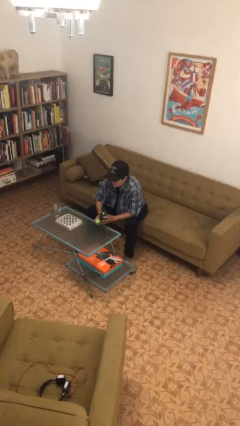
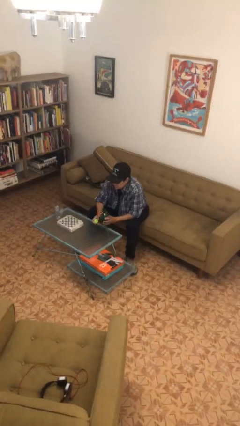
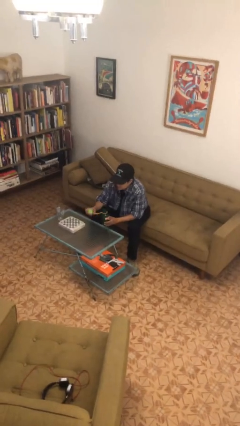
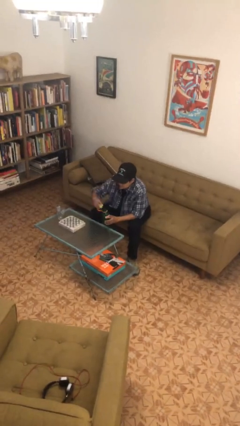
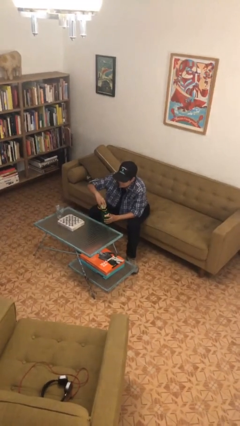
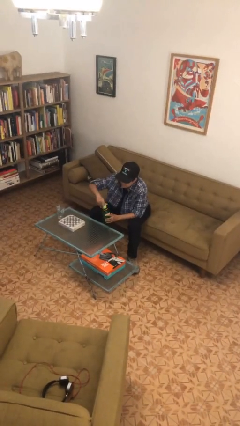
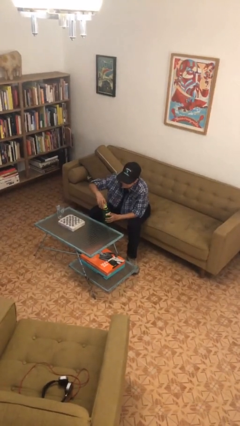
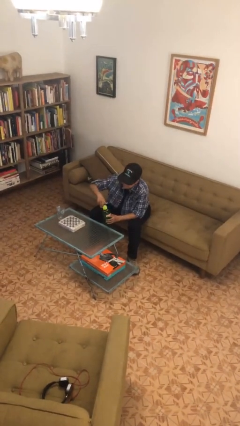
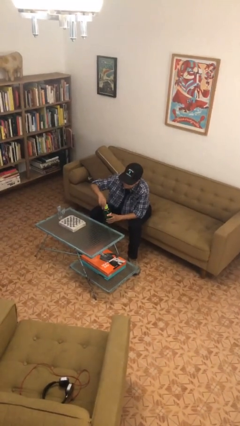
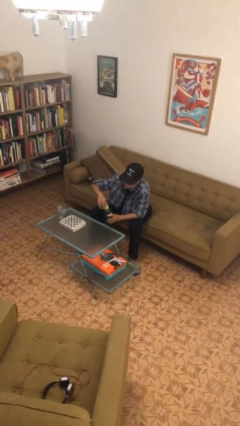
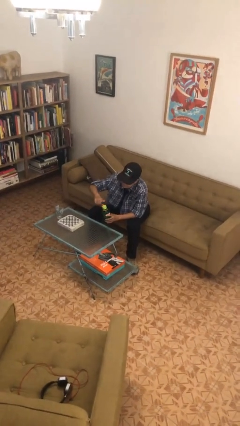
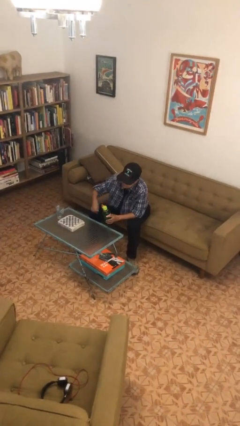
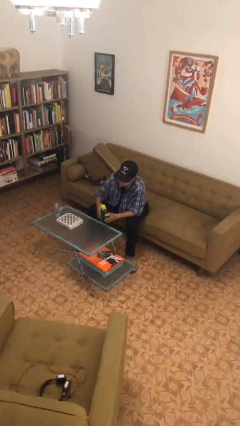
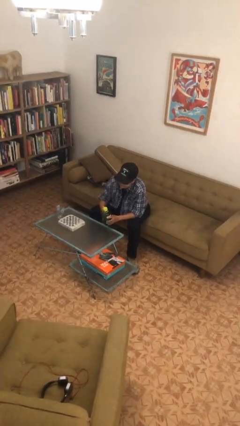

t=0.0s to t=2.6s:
person screws lid to bottle

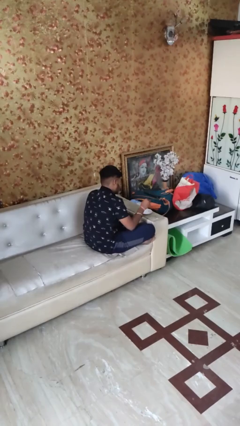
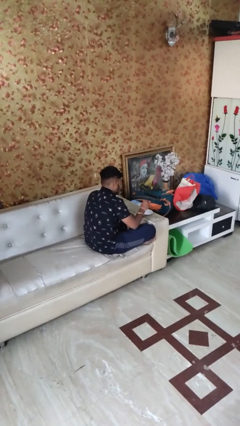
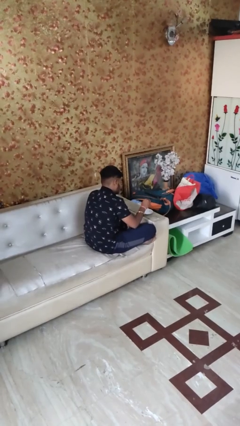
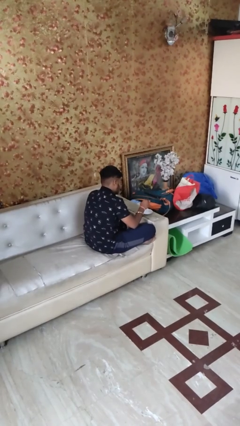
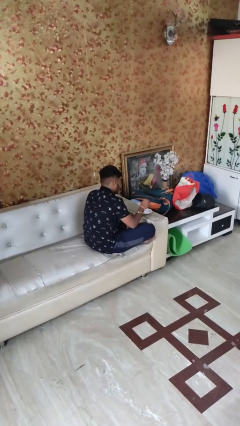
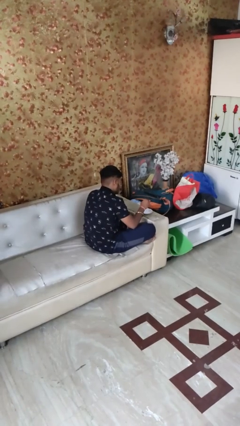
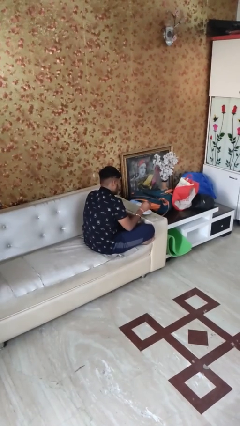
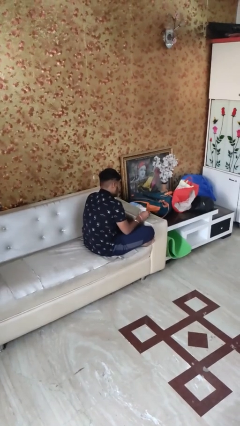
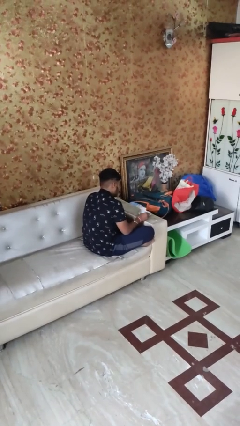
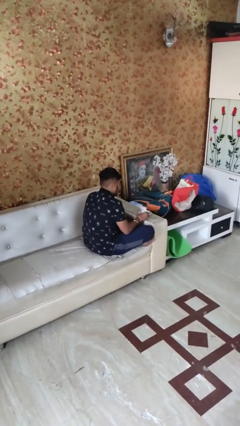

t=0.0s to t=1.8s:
person stirs mug

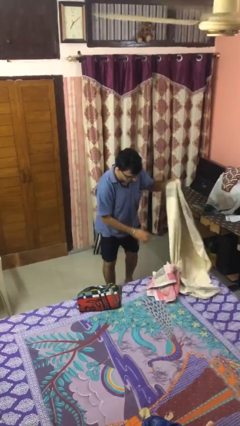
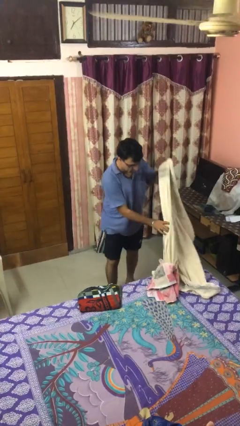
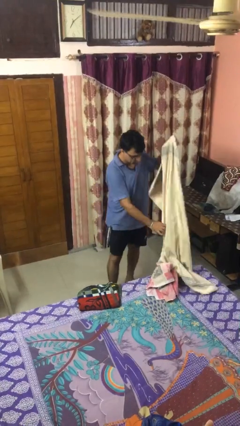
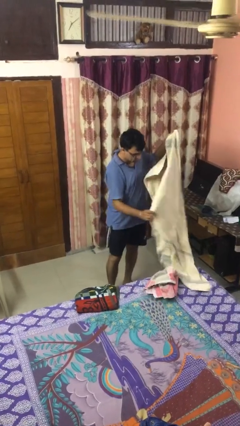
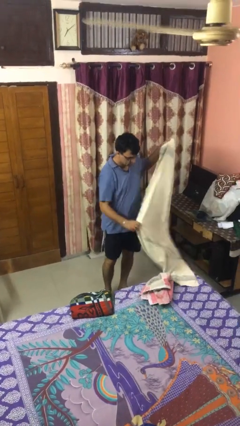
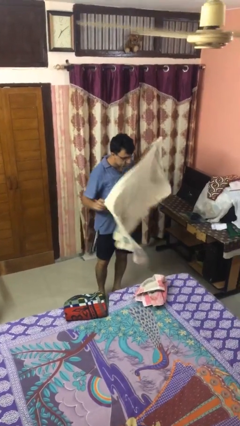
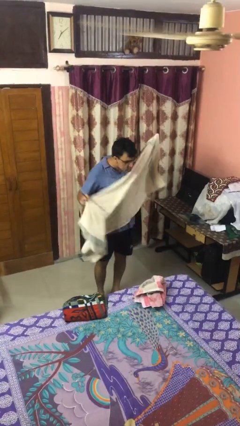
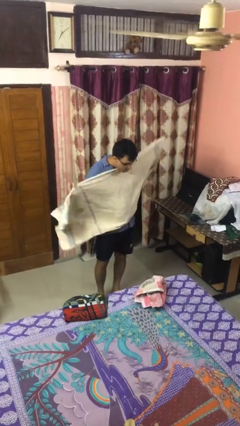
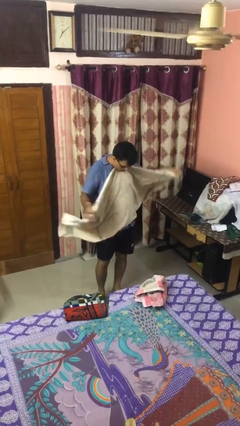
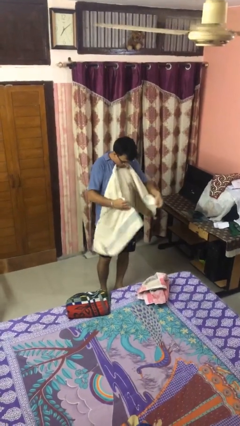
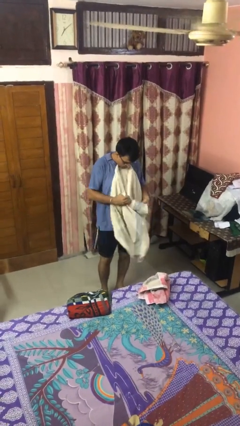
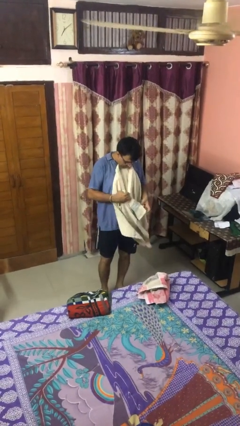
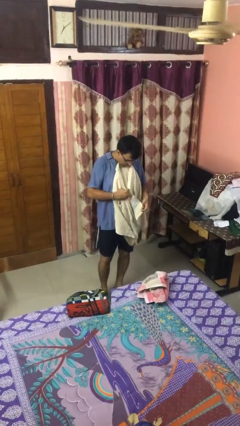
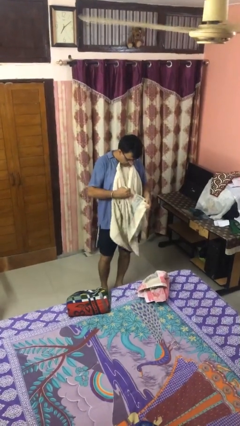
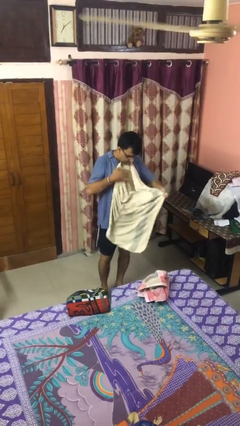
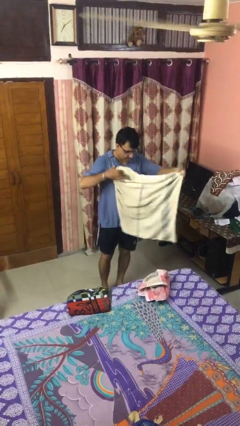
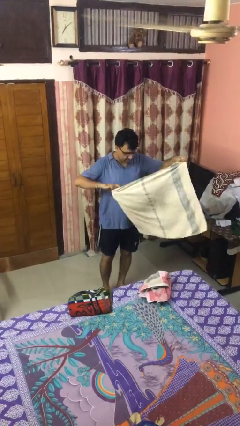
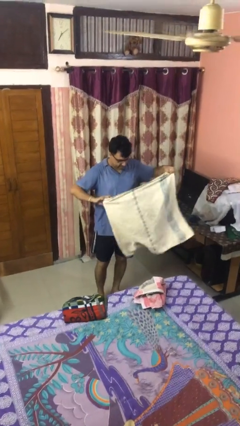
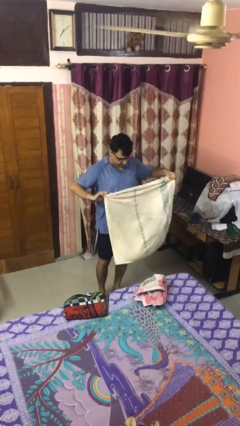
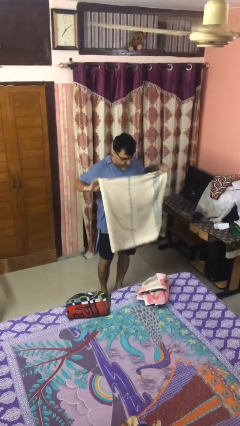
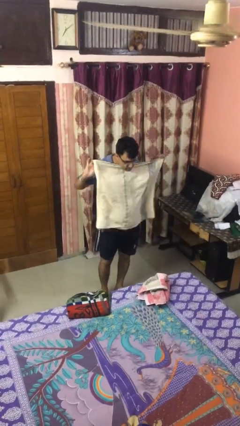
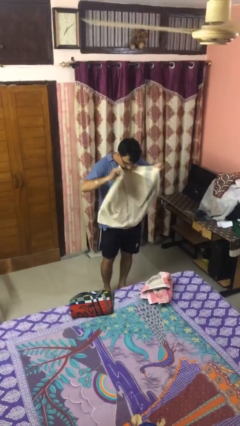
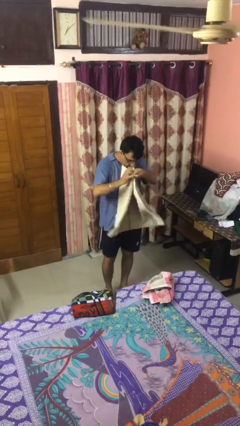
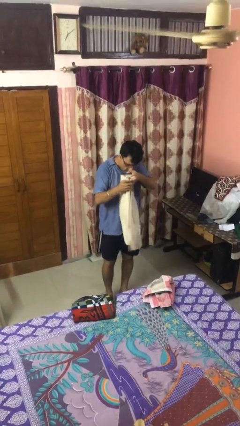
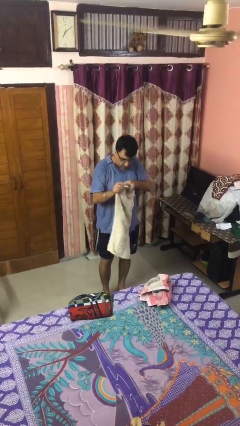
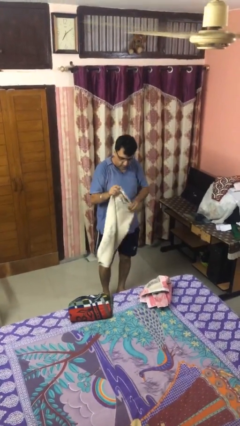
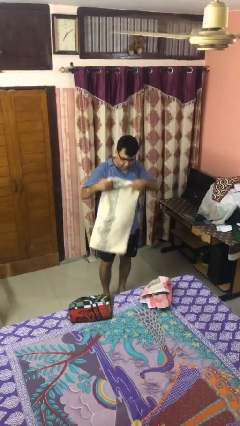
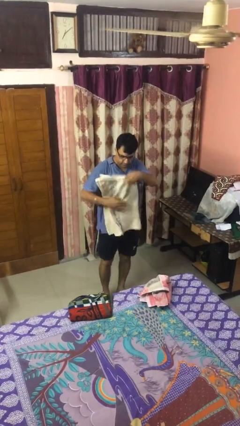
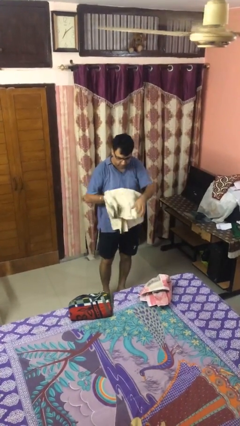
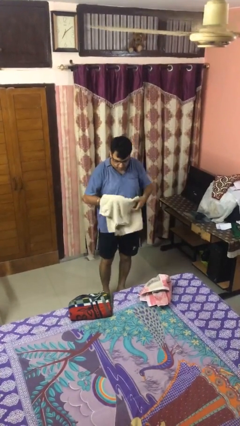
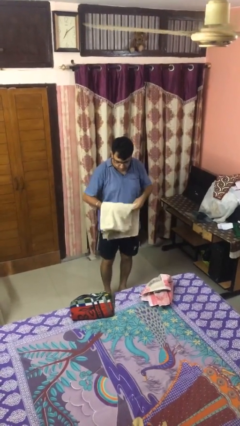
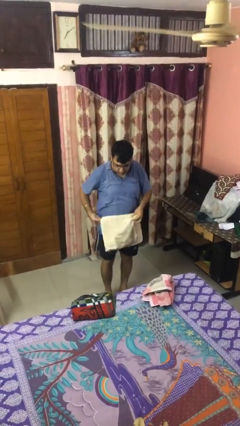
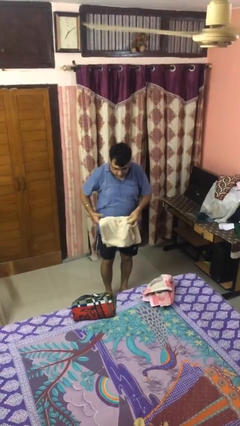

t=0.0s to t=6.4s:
person folds towel

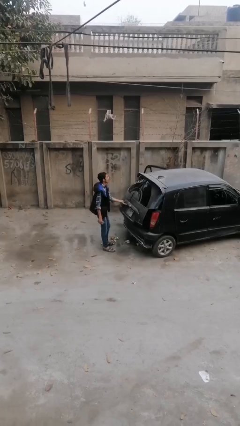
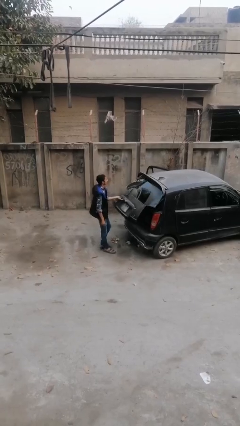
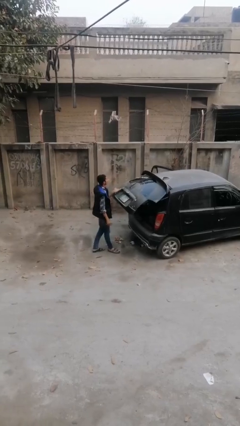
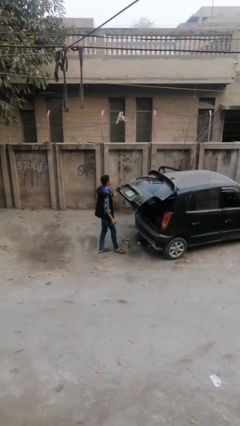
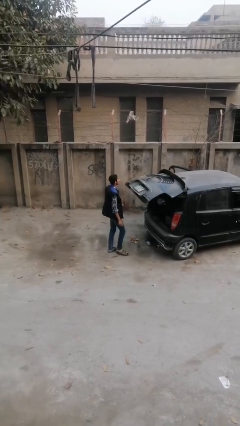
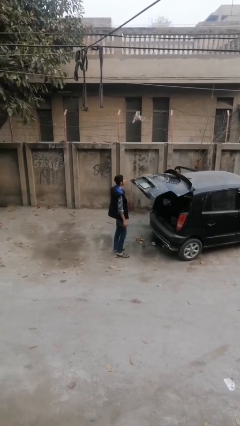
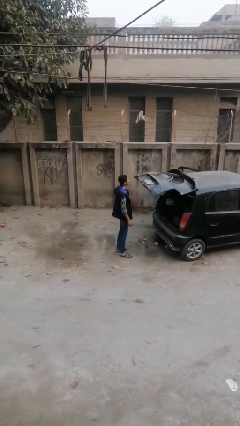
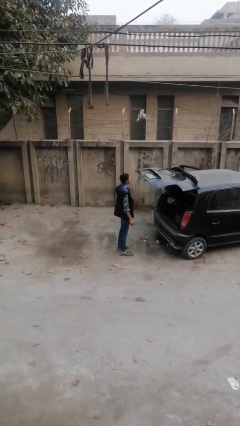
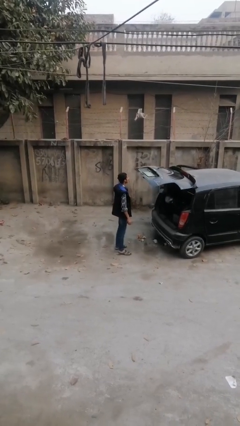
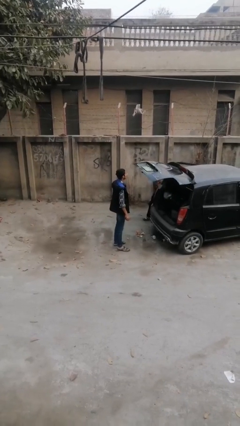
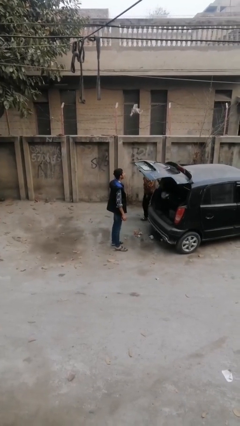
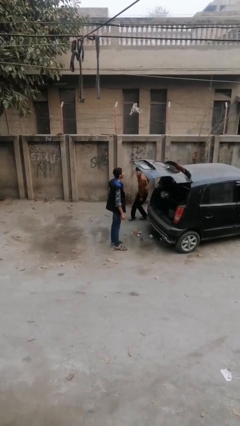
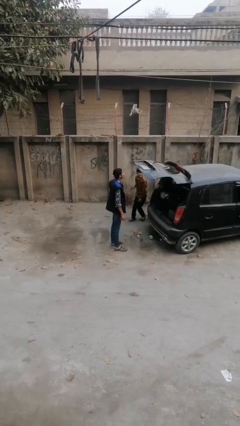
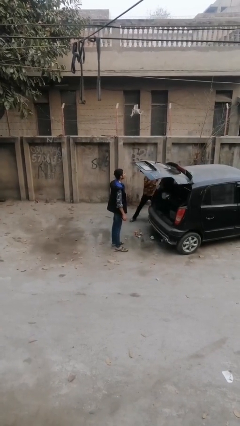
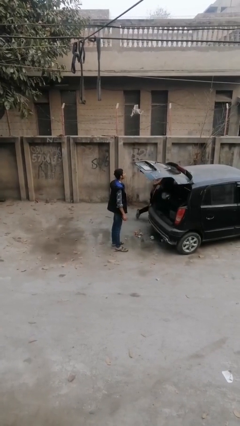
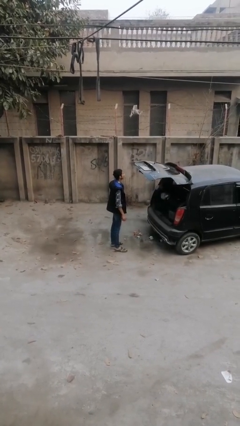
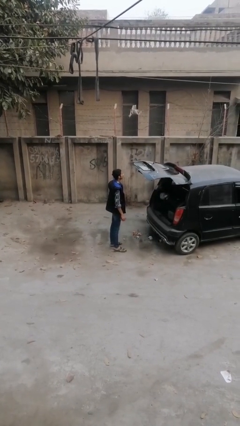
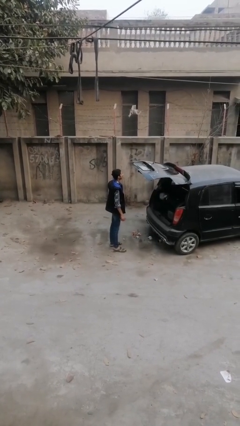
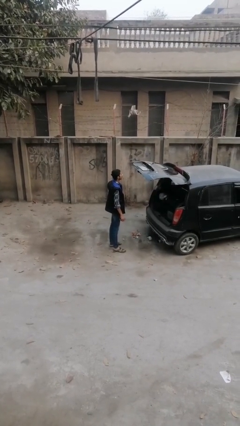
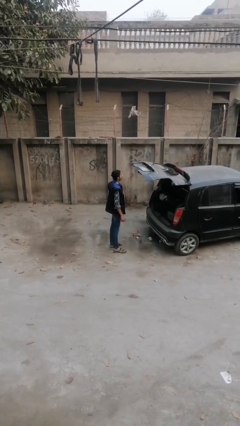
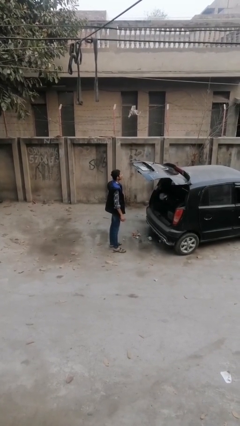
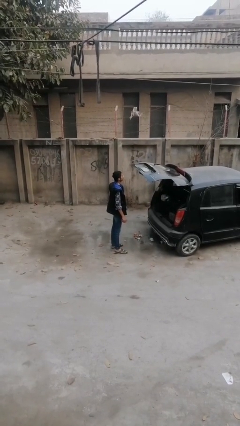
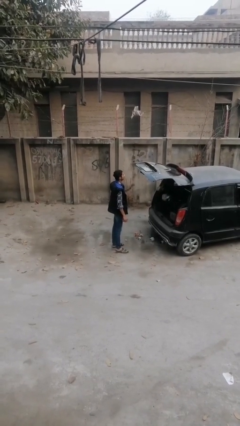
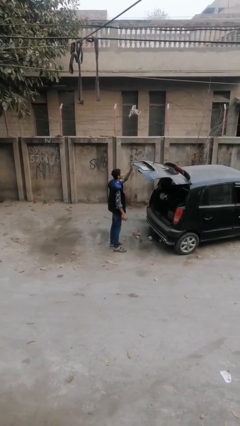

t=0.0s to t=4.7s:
person opens car trunk

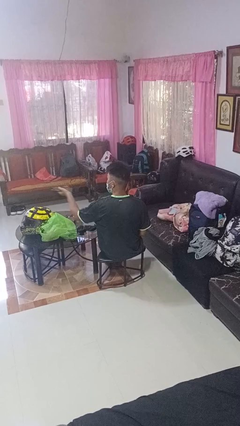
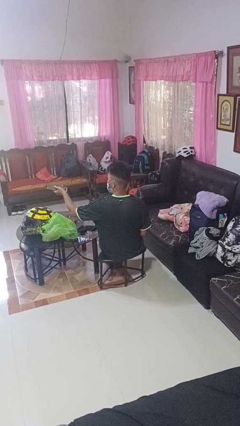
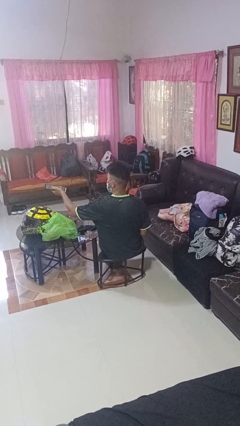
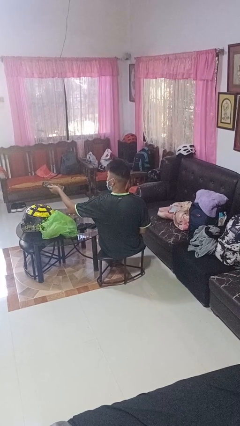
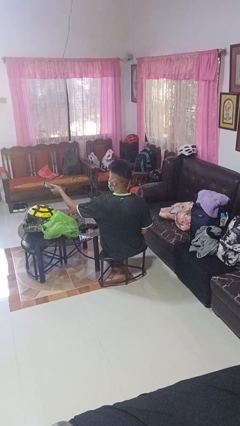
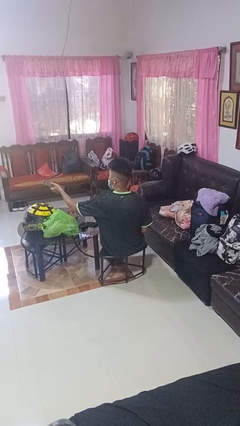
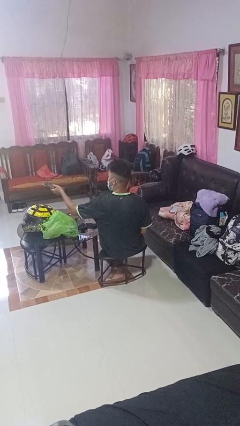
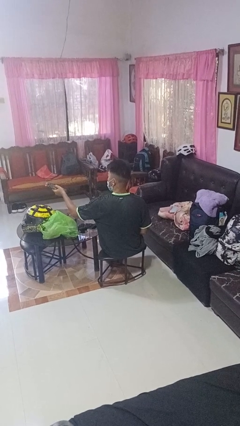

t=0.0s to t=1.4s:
person uses television remote

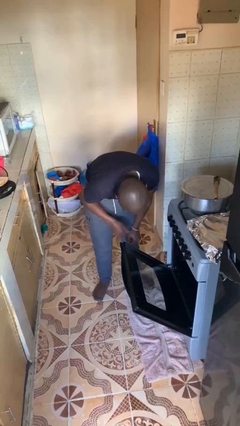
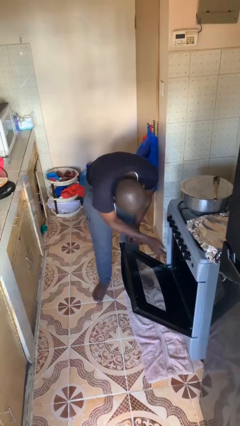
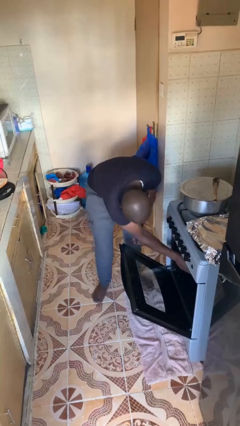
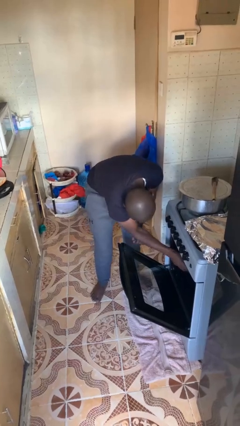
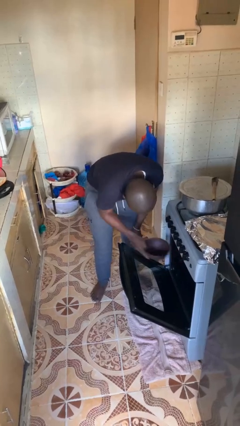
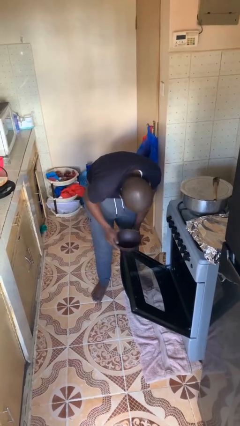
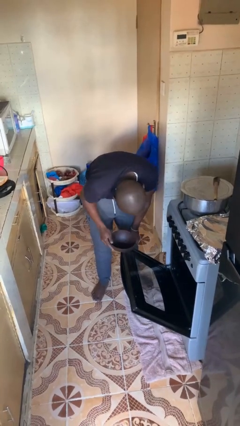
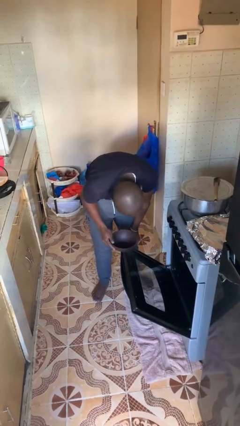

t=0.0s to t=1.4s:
person takes object from oven
